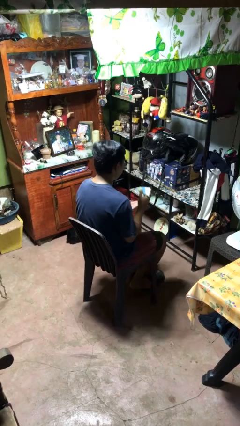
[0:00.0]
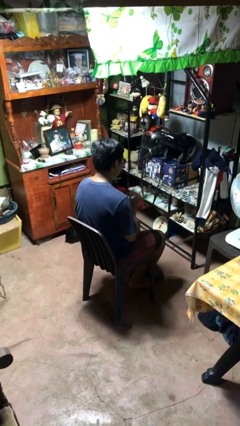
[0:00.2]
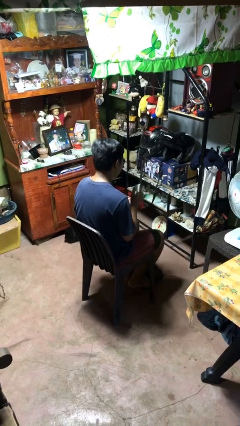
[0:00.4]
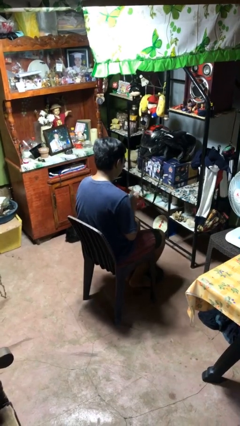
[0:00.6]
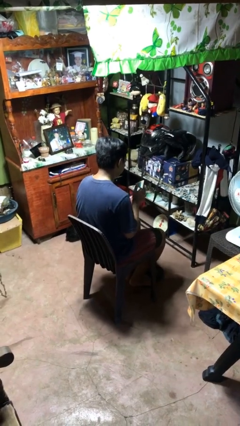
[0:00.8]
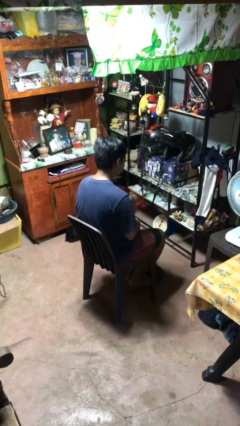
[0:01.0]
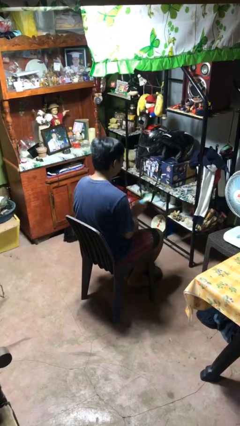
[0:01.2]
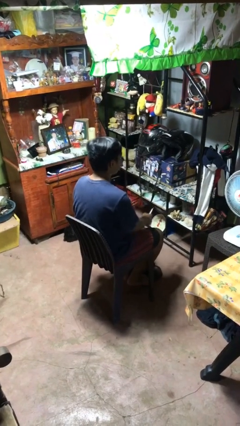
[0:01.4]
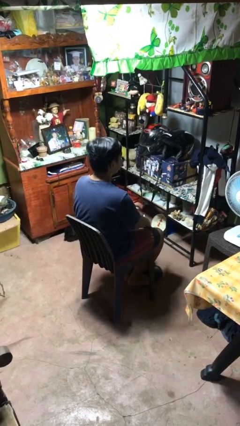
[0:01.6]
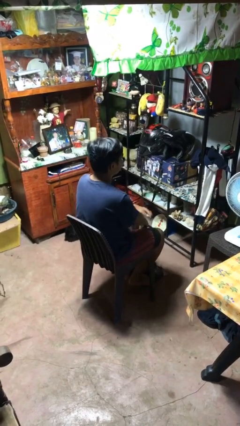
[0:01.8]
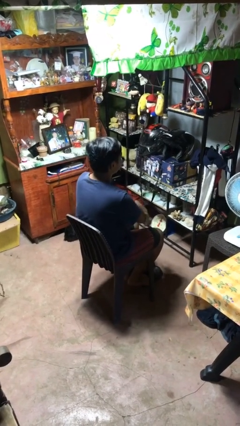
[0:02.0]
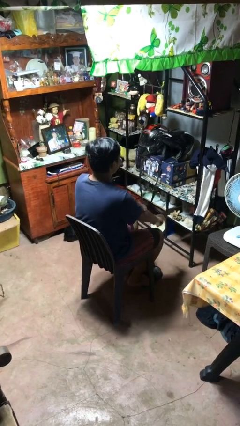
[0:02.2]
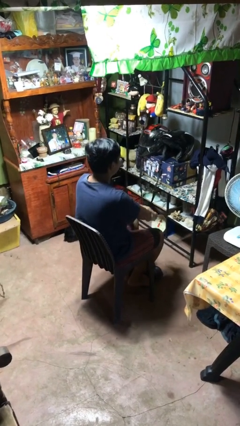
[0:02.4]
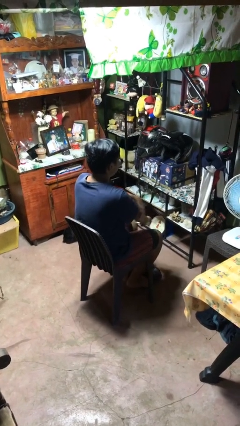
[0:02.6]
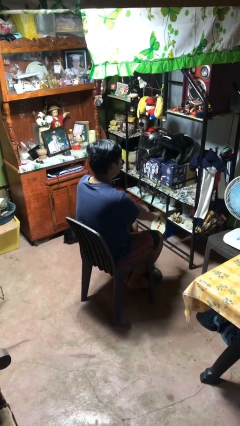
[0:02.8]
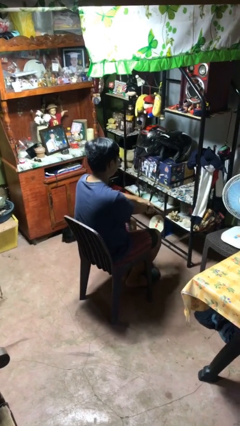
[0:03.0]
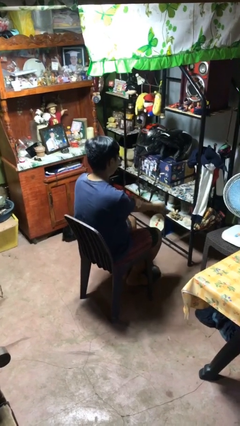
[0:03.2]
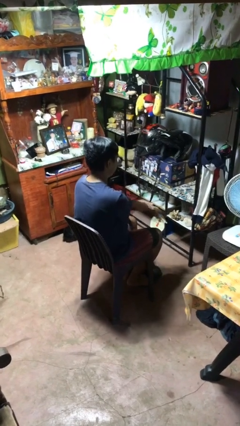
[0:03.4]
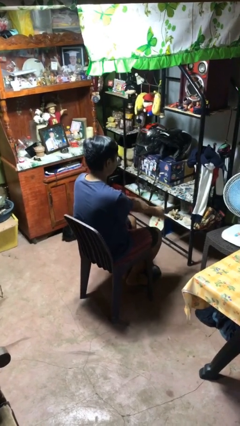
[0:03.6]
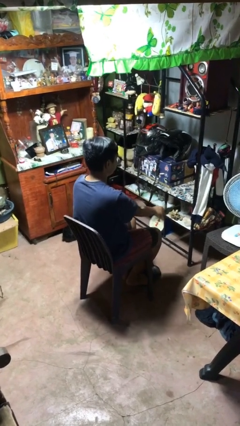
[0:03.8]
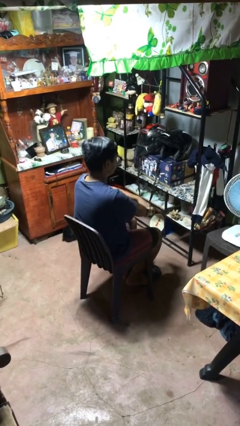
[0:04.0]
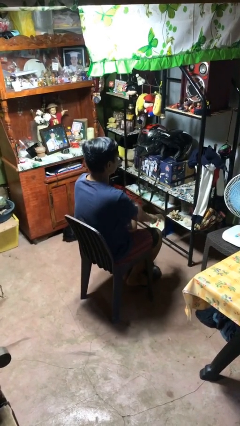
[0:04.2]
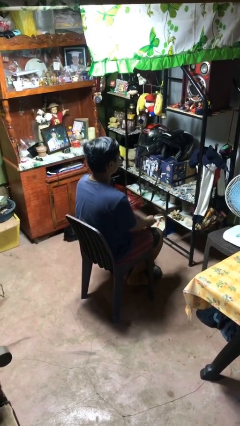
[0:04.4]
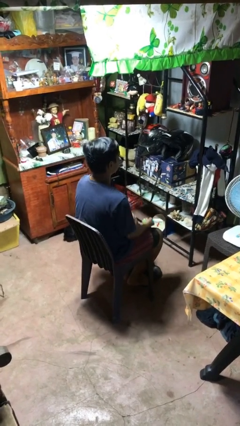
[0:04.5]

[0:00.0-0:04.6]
person applies sunscreen

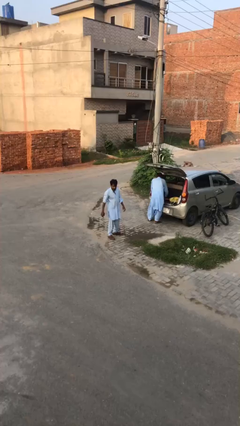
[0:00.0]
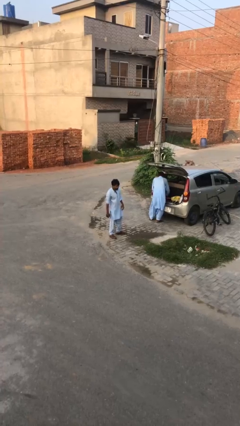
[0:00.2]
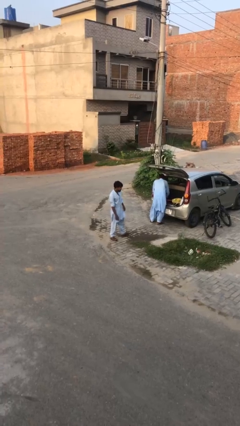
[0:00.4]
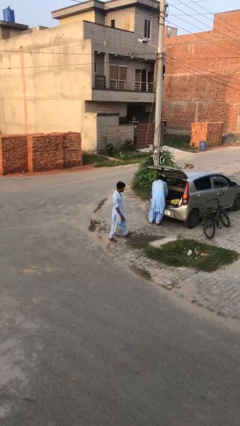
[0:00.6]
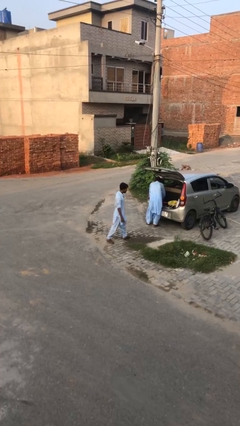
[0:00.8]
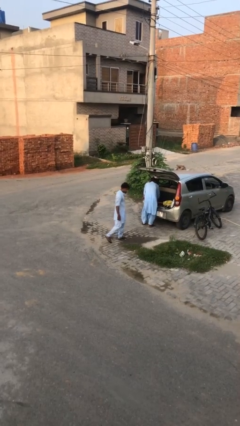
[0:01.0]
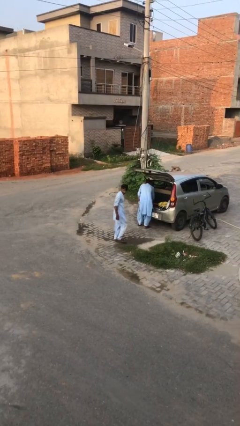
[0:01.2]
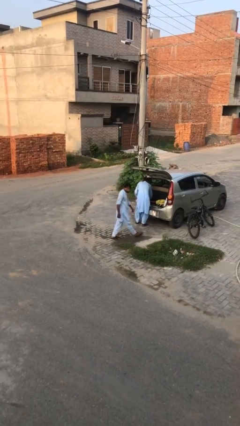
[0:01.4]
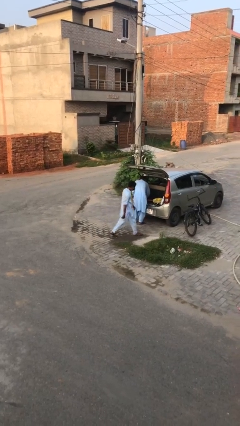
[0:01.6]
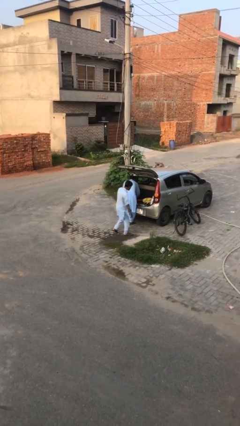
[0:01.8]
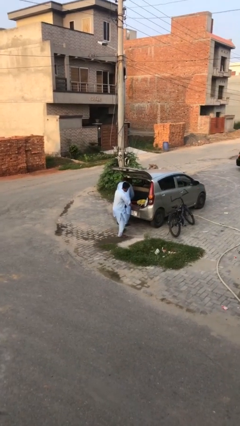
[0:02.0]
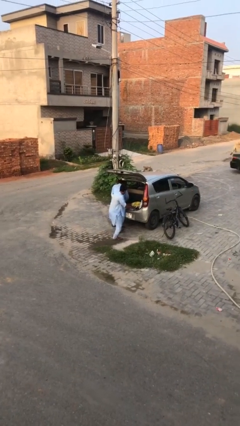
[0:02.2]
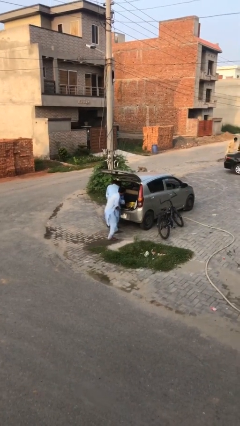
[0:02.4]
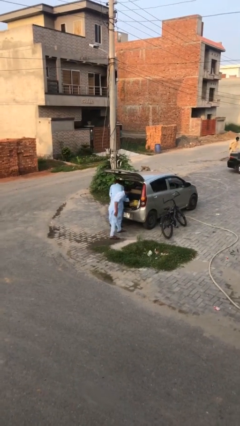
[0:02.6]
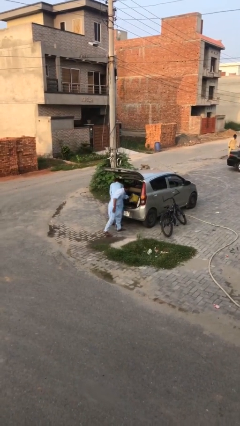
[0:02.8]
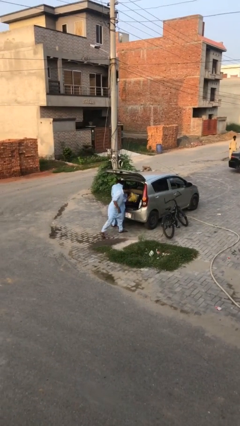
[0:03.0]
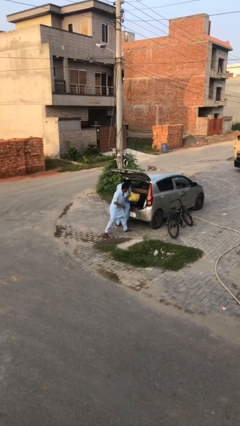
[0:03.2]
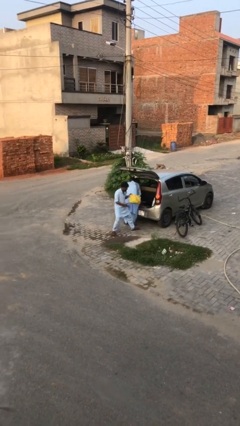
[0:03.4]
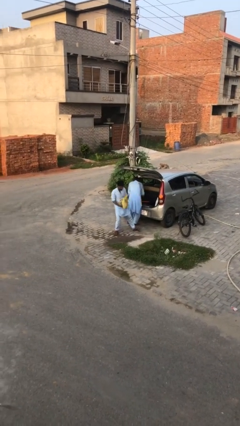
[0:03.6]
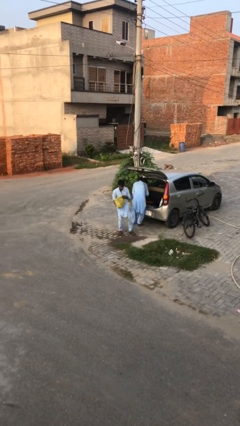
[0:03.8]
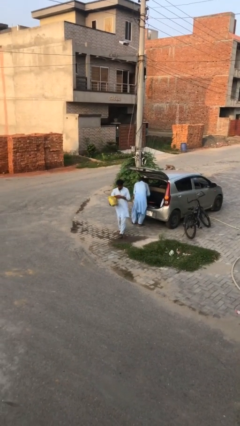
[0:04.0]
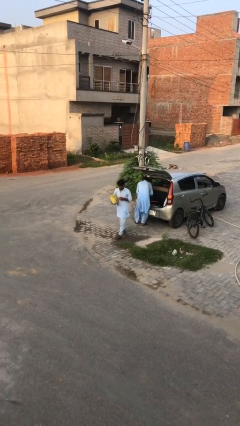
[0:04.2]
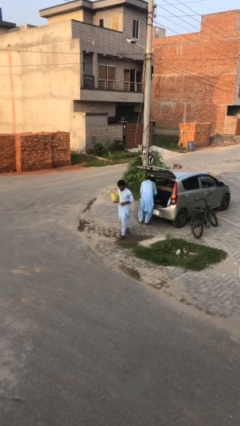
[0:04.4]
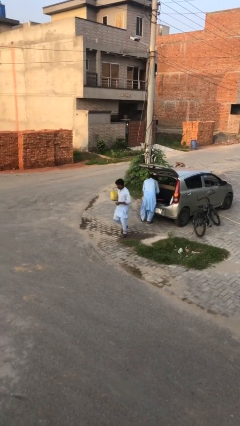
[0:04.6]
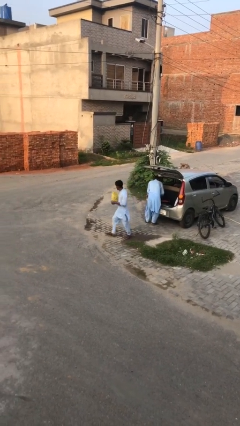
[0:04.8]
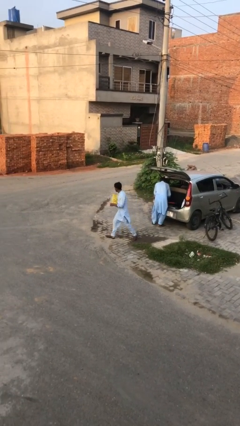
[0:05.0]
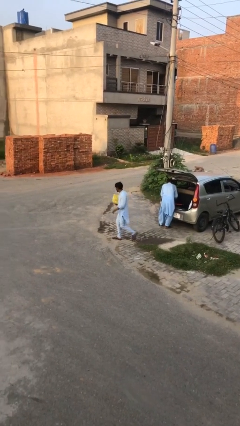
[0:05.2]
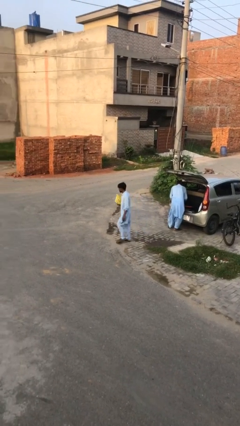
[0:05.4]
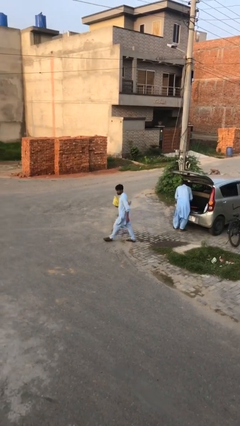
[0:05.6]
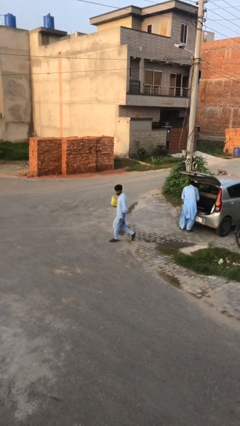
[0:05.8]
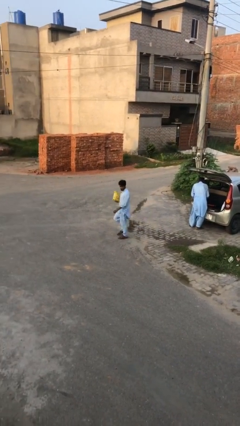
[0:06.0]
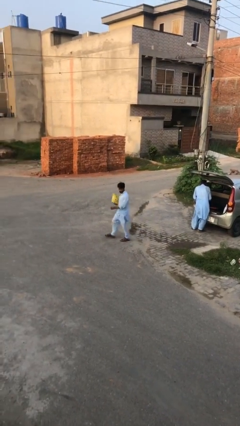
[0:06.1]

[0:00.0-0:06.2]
person steals object from person

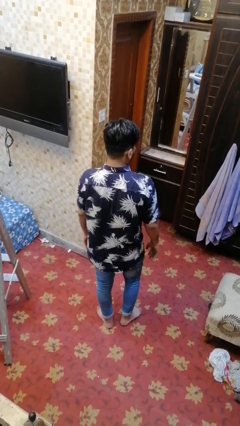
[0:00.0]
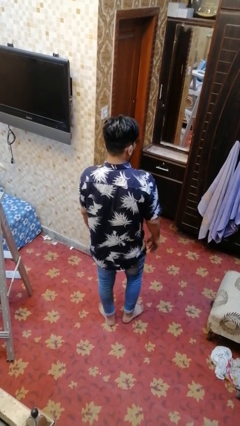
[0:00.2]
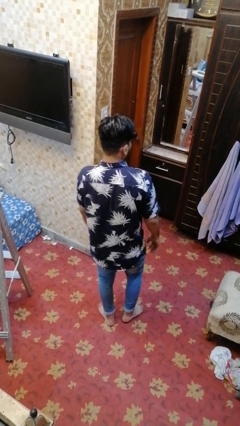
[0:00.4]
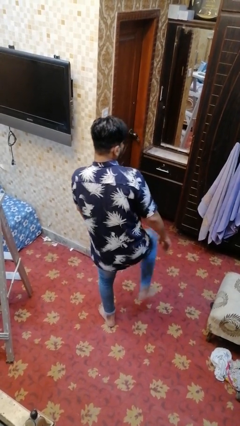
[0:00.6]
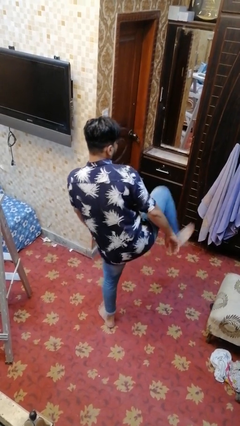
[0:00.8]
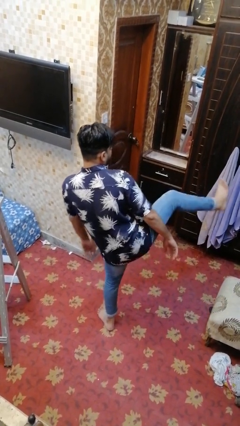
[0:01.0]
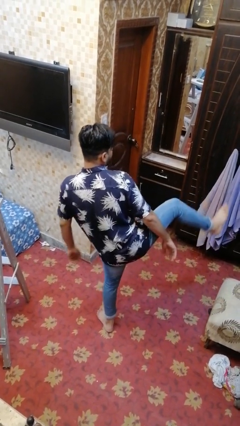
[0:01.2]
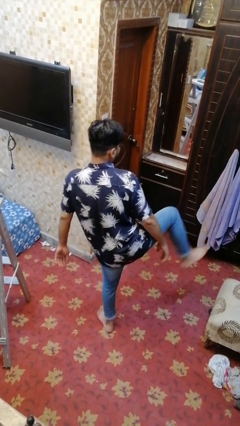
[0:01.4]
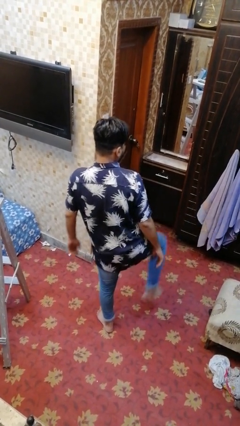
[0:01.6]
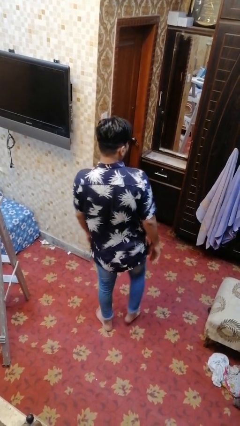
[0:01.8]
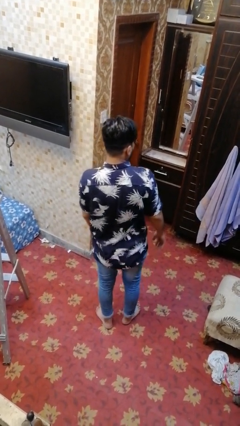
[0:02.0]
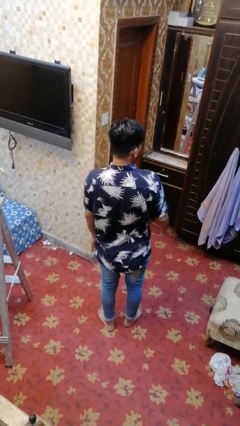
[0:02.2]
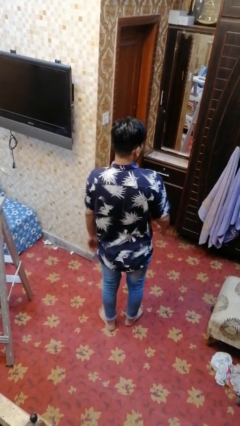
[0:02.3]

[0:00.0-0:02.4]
person karate kicks

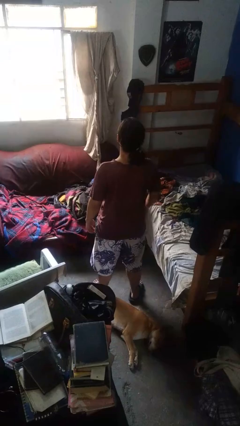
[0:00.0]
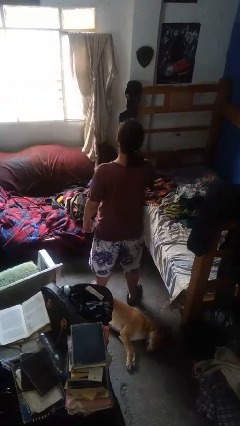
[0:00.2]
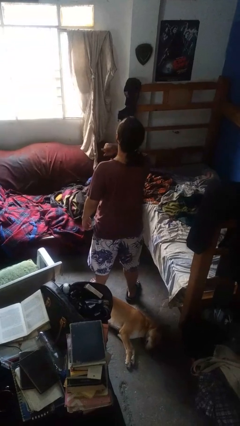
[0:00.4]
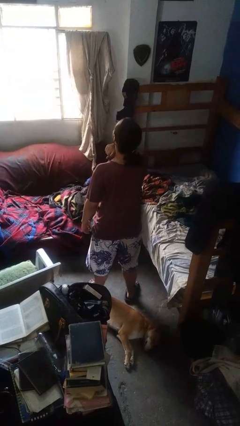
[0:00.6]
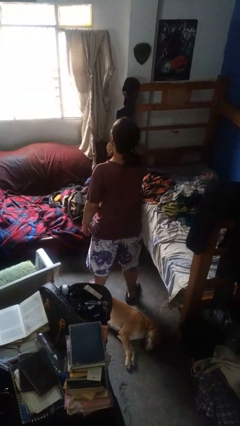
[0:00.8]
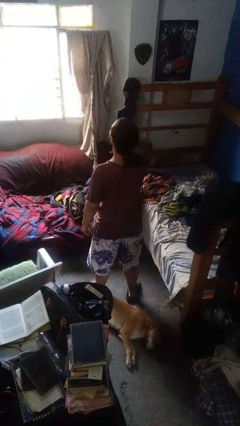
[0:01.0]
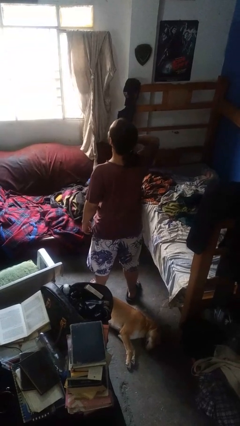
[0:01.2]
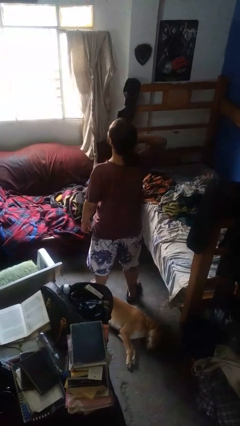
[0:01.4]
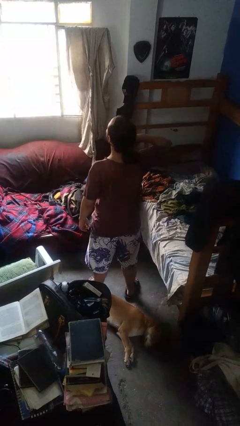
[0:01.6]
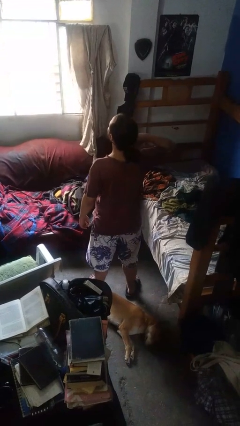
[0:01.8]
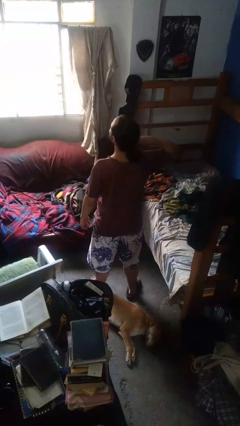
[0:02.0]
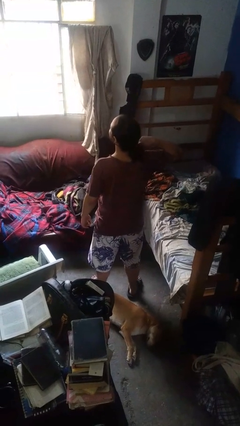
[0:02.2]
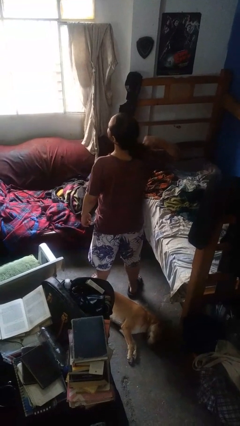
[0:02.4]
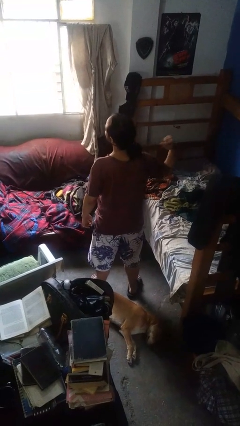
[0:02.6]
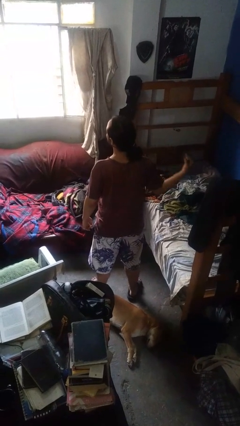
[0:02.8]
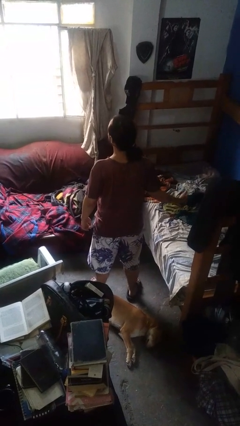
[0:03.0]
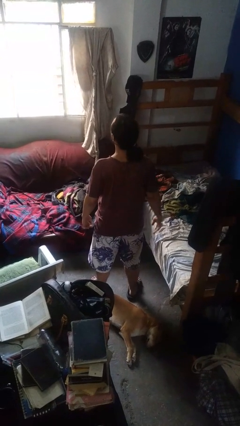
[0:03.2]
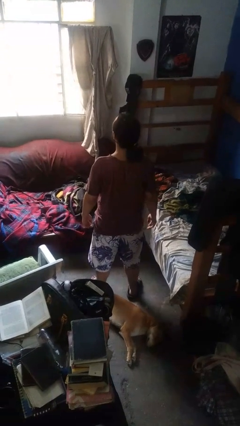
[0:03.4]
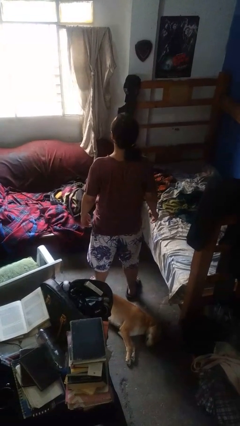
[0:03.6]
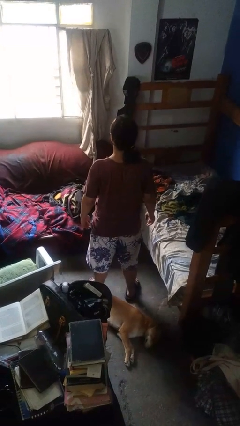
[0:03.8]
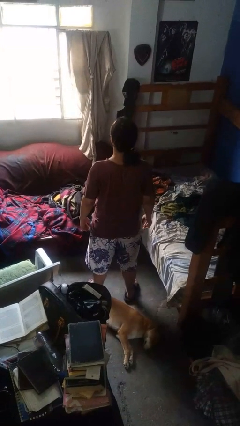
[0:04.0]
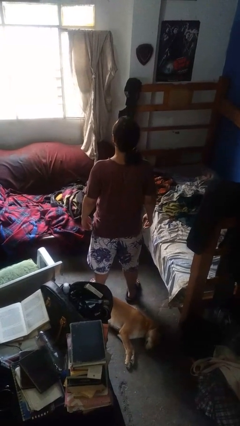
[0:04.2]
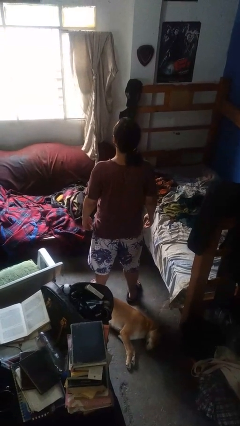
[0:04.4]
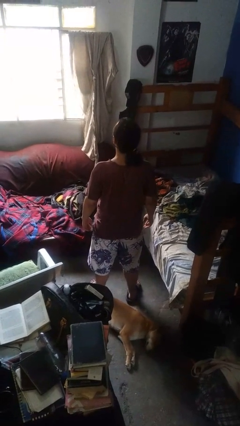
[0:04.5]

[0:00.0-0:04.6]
person gestures watch closely
